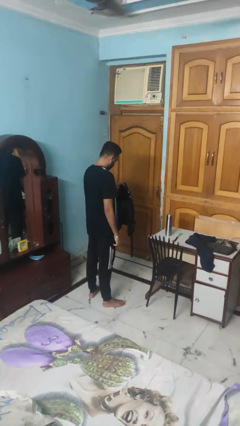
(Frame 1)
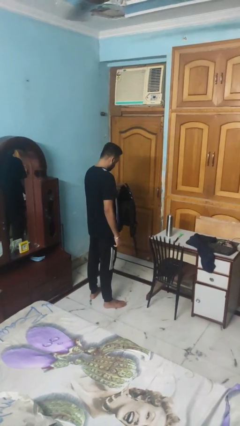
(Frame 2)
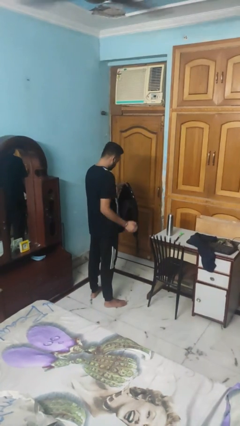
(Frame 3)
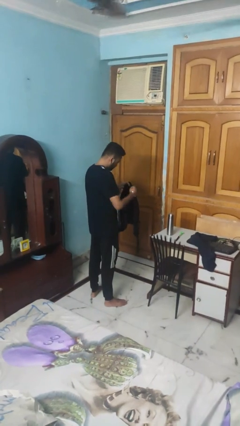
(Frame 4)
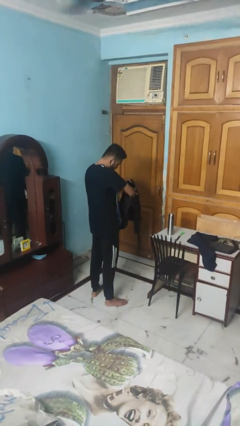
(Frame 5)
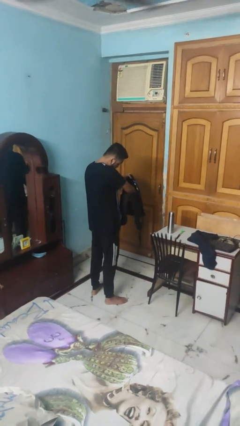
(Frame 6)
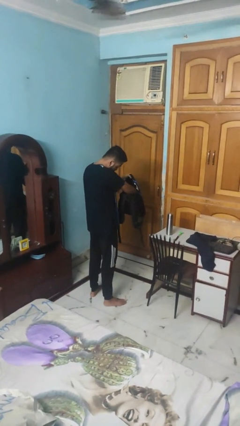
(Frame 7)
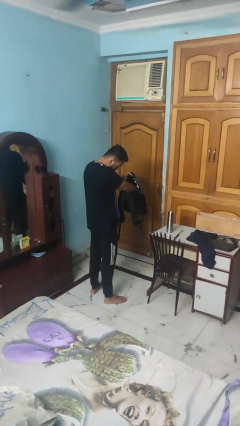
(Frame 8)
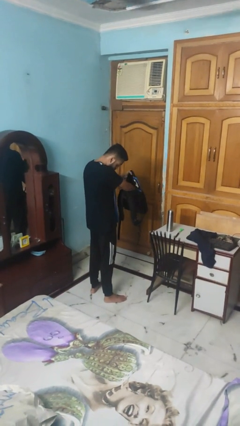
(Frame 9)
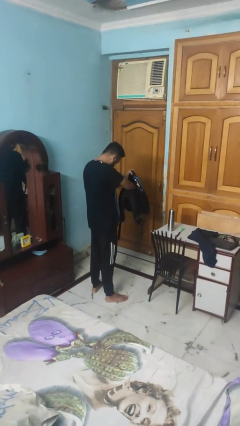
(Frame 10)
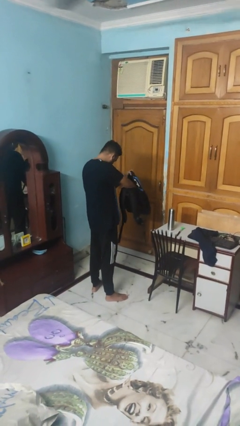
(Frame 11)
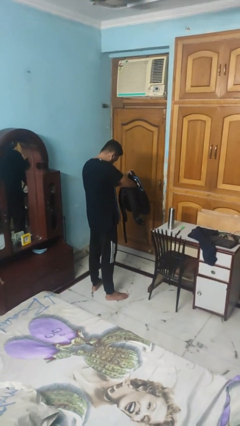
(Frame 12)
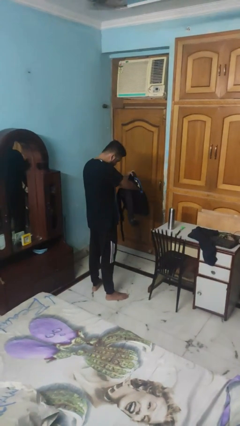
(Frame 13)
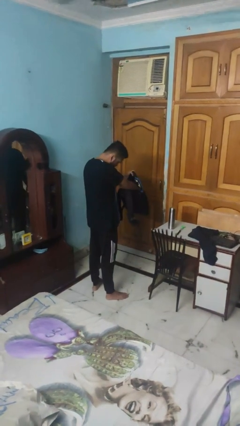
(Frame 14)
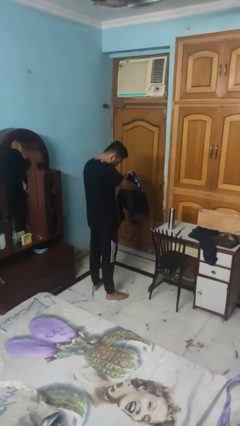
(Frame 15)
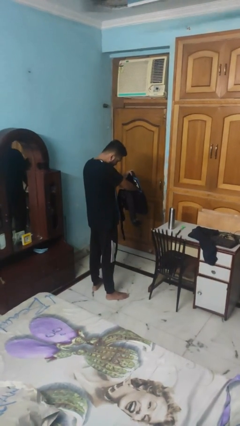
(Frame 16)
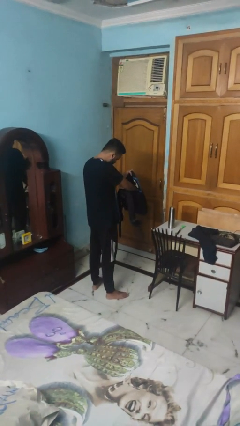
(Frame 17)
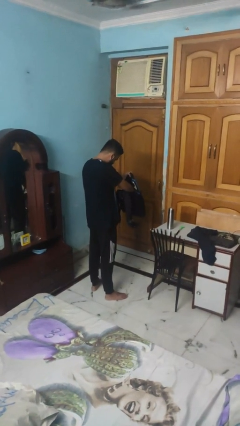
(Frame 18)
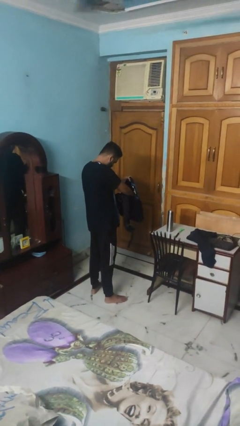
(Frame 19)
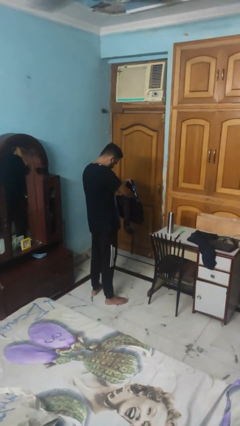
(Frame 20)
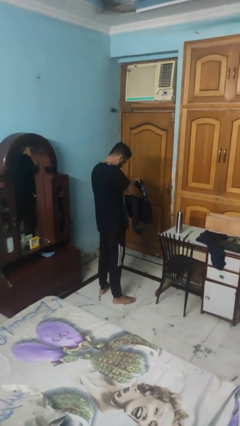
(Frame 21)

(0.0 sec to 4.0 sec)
person searches in backpack

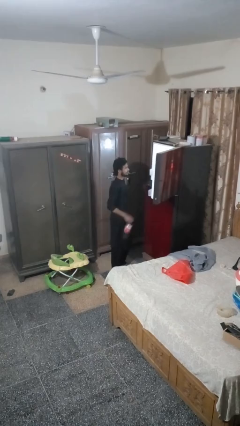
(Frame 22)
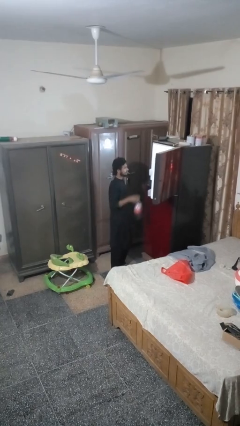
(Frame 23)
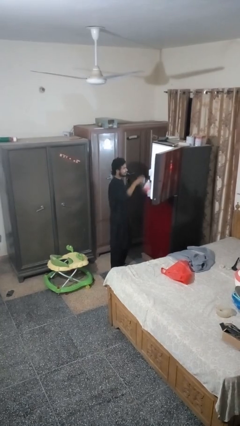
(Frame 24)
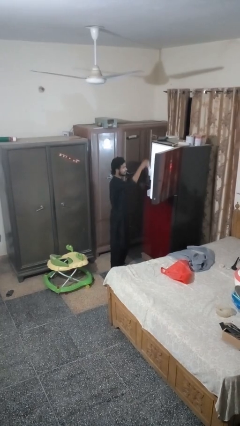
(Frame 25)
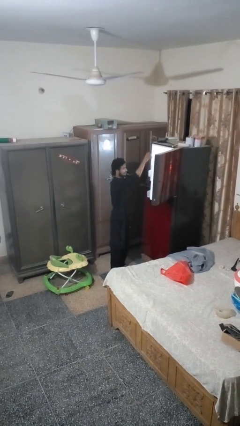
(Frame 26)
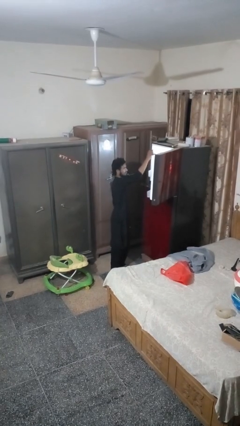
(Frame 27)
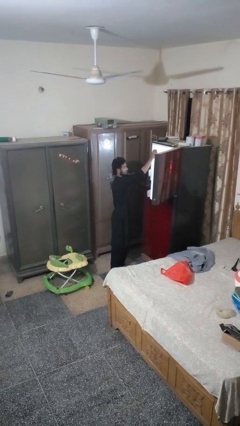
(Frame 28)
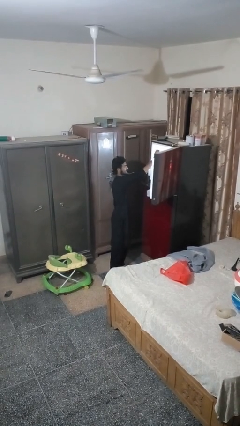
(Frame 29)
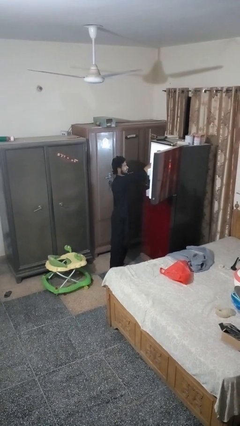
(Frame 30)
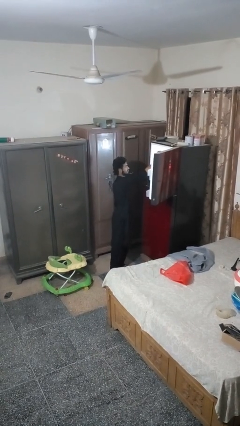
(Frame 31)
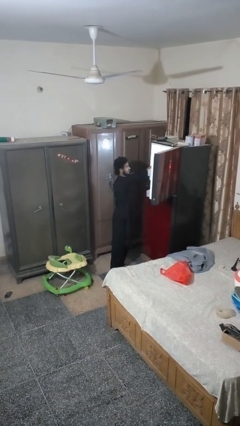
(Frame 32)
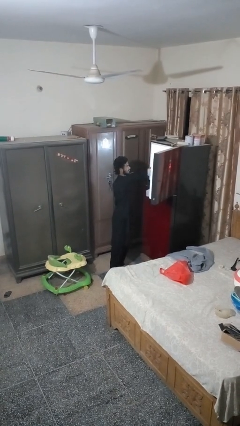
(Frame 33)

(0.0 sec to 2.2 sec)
person puts object into refrigerator

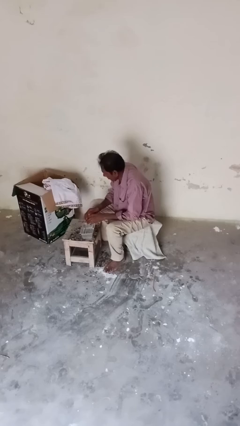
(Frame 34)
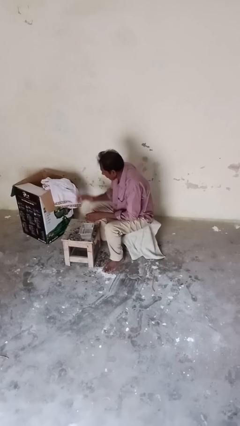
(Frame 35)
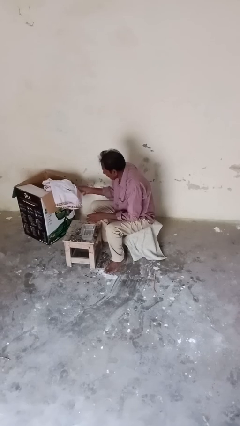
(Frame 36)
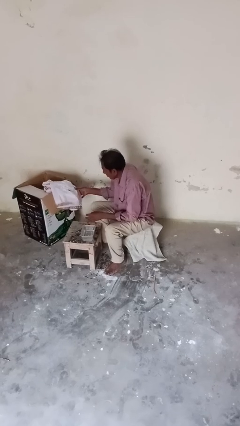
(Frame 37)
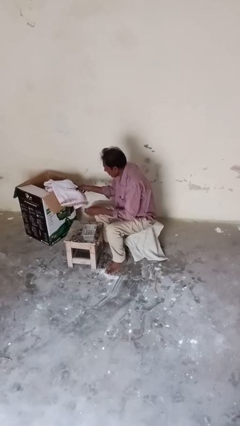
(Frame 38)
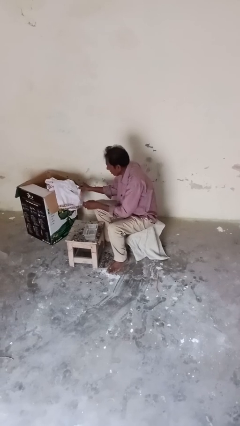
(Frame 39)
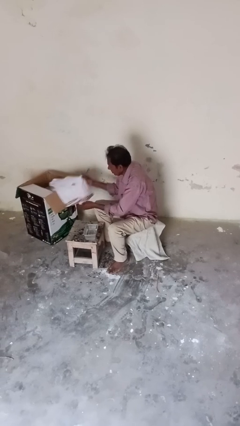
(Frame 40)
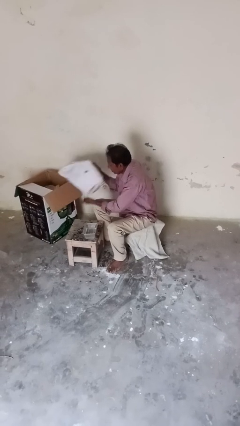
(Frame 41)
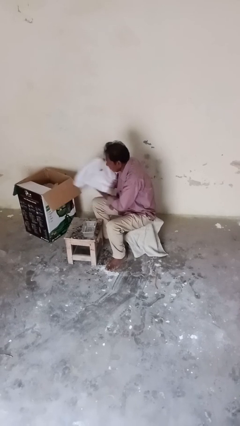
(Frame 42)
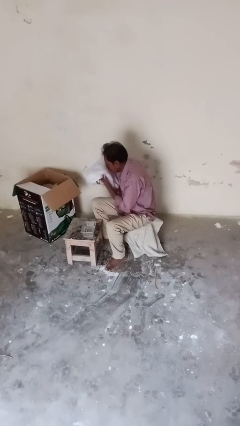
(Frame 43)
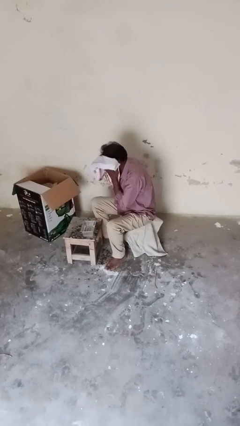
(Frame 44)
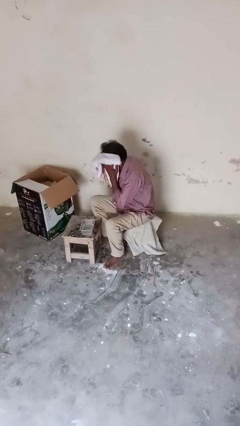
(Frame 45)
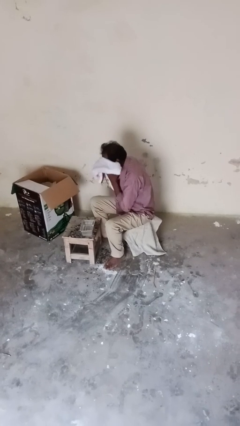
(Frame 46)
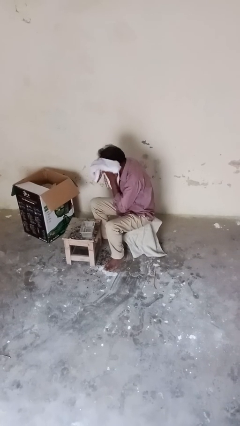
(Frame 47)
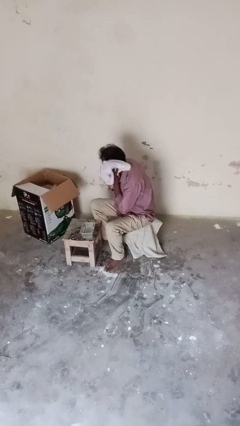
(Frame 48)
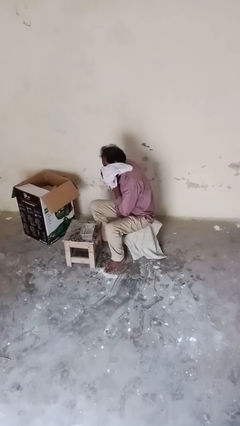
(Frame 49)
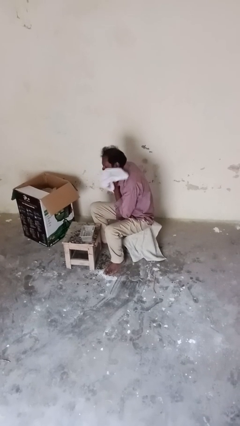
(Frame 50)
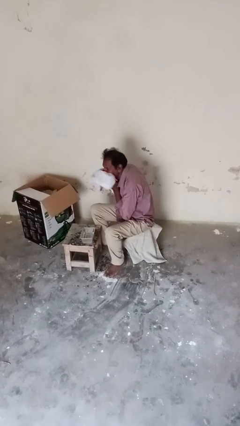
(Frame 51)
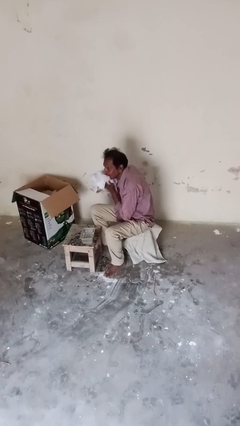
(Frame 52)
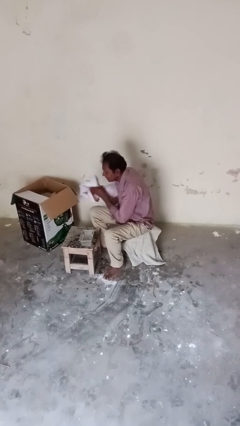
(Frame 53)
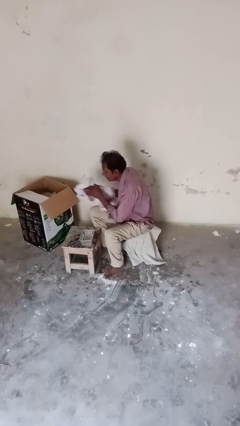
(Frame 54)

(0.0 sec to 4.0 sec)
person dries face with towel

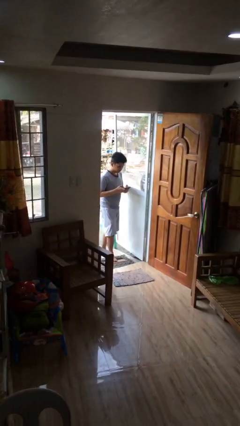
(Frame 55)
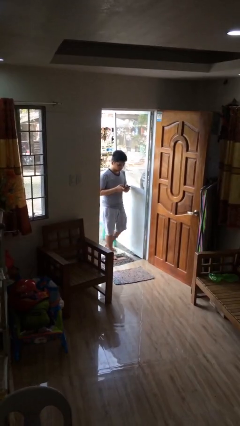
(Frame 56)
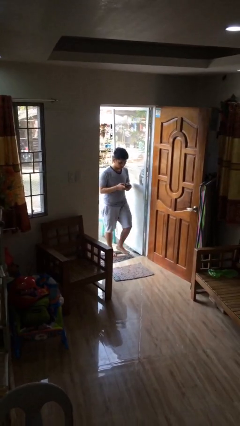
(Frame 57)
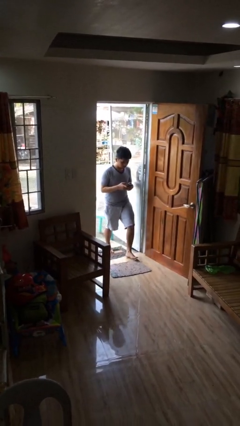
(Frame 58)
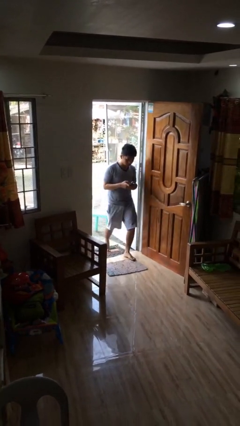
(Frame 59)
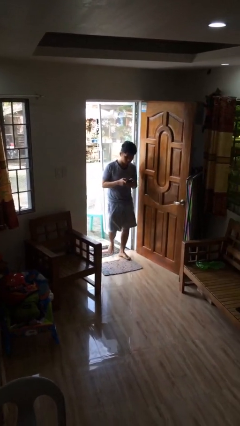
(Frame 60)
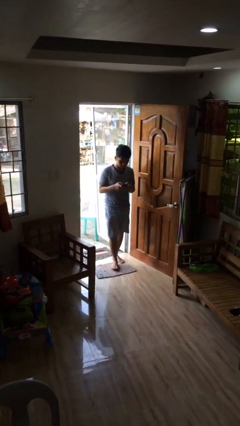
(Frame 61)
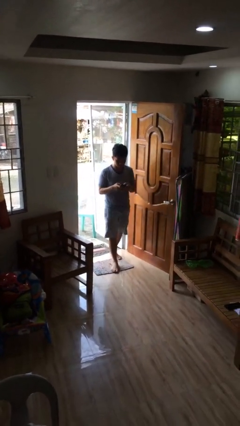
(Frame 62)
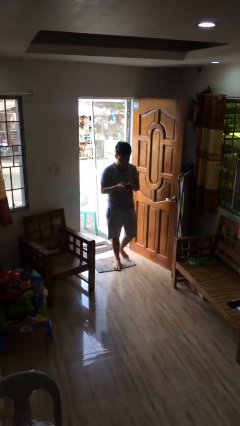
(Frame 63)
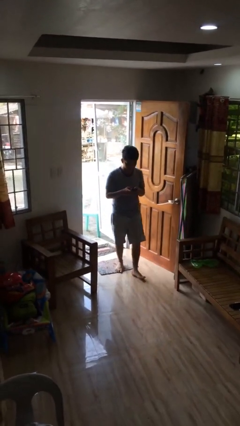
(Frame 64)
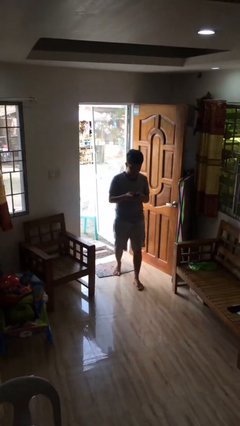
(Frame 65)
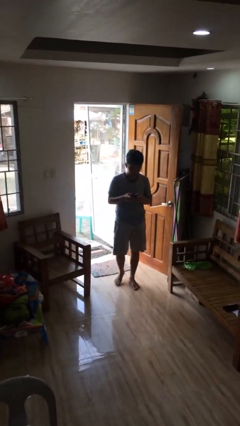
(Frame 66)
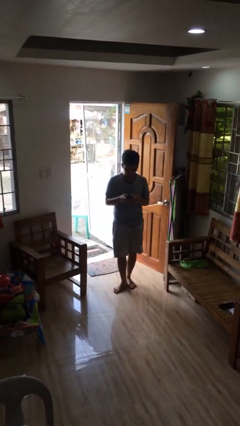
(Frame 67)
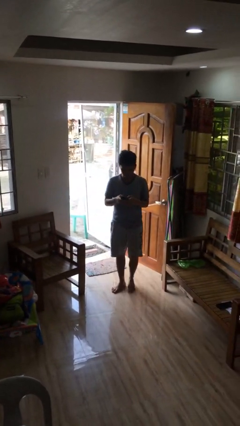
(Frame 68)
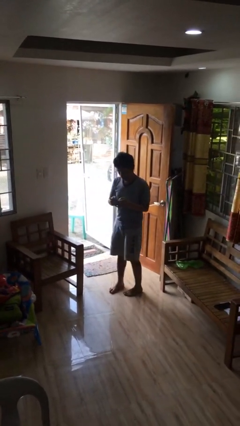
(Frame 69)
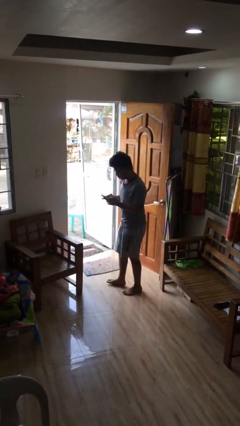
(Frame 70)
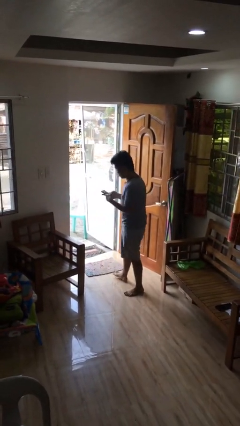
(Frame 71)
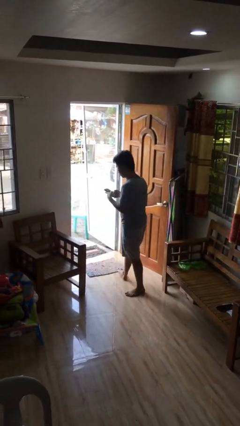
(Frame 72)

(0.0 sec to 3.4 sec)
person enters scene through structure

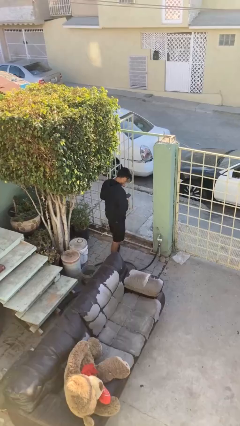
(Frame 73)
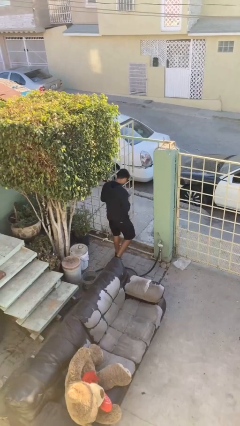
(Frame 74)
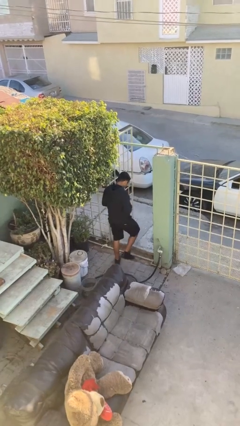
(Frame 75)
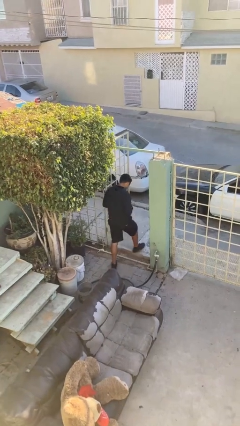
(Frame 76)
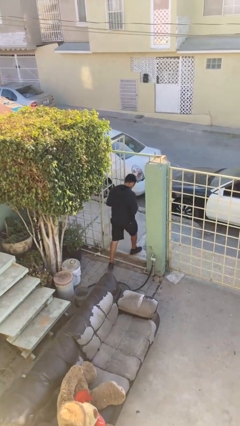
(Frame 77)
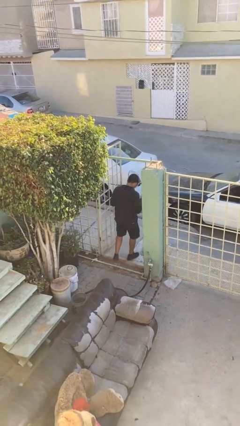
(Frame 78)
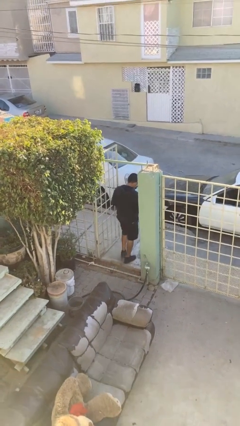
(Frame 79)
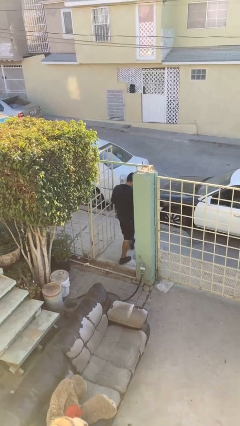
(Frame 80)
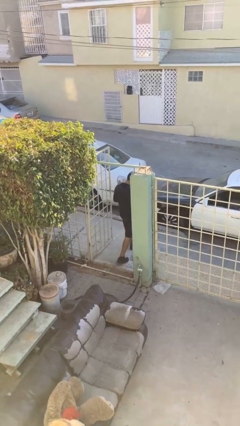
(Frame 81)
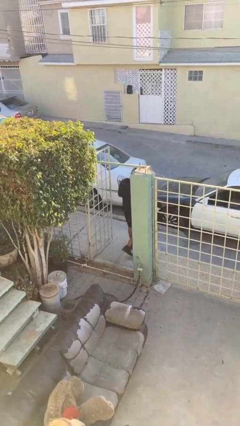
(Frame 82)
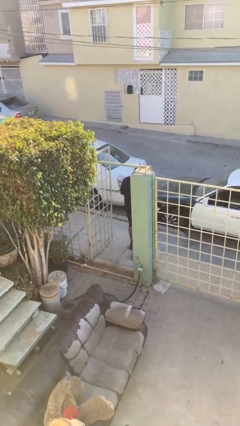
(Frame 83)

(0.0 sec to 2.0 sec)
person exits scene through structure

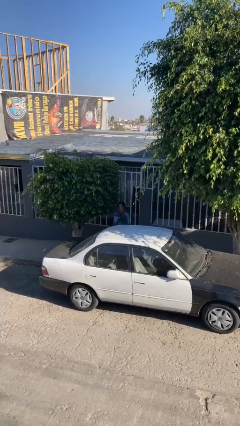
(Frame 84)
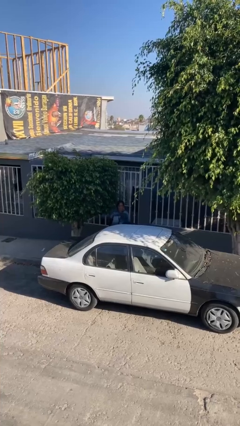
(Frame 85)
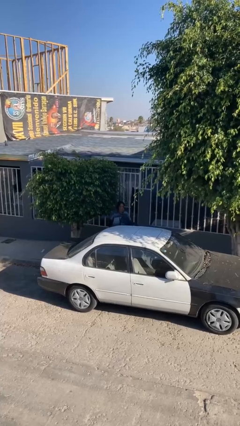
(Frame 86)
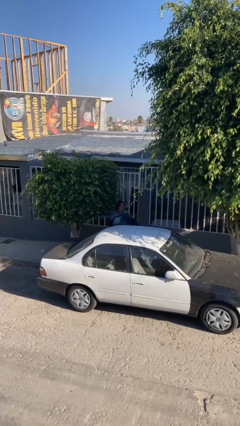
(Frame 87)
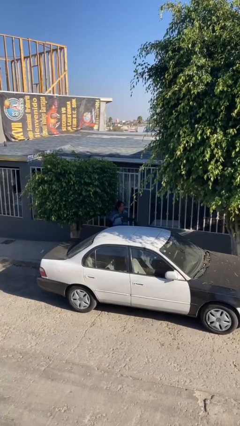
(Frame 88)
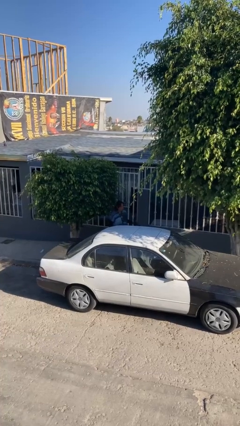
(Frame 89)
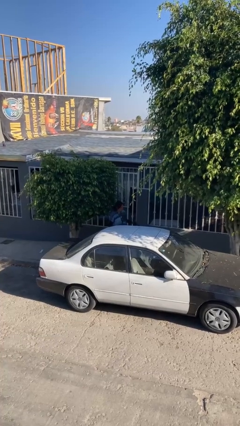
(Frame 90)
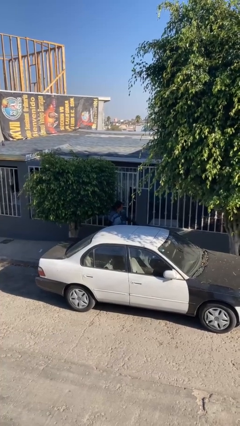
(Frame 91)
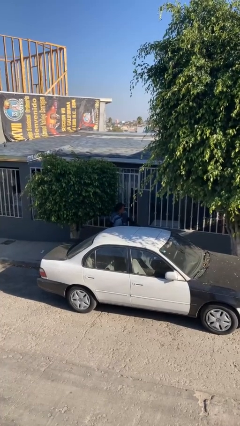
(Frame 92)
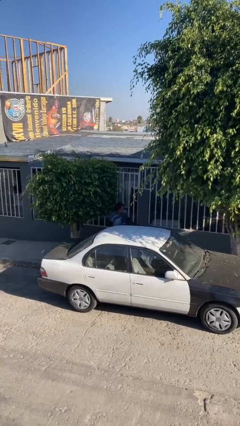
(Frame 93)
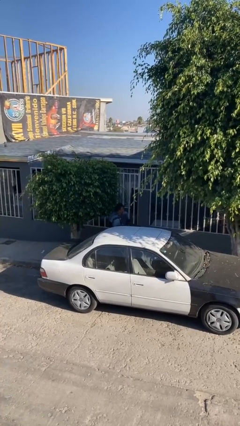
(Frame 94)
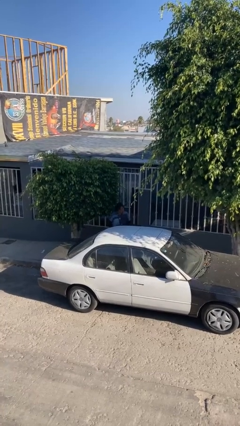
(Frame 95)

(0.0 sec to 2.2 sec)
person opens car door
